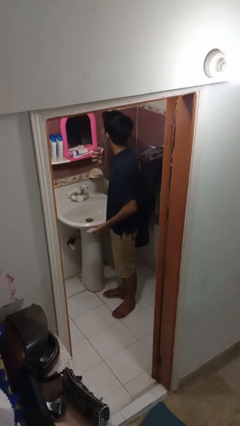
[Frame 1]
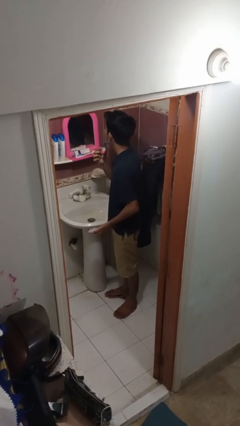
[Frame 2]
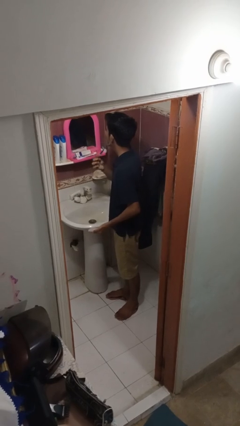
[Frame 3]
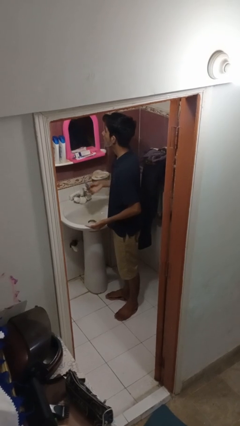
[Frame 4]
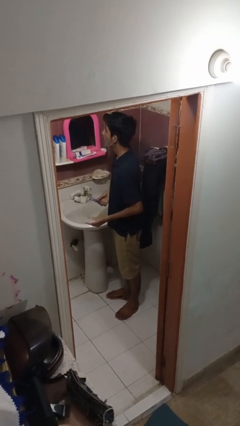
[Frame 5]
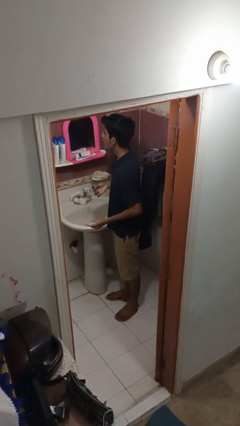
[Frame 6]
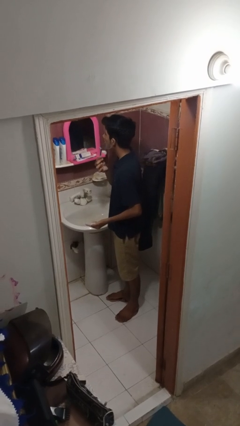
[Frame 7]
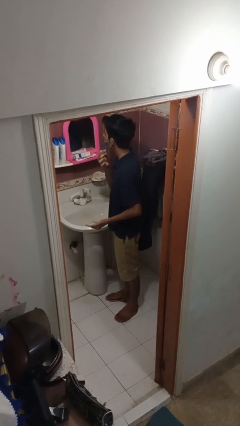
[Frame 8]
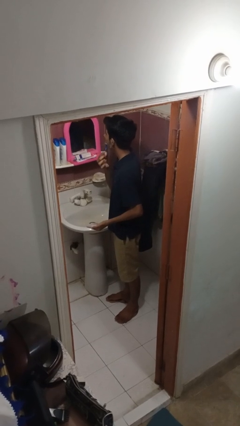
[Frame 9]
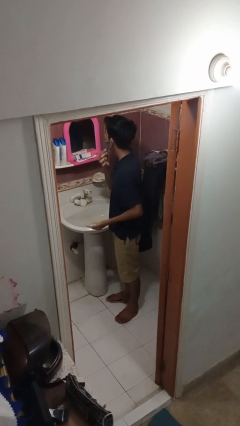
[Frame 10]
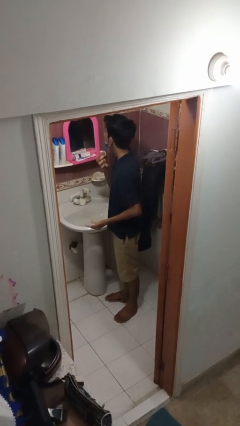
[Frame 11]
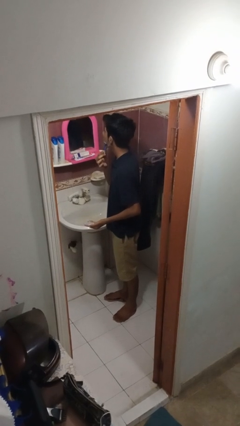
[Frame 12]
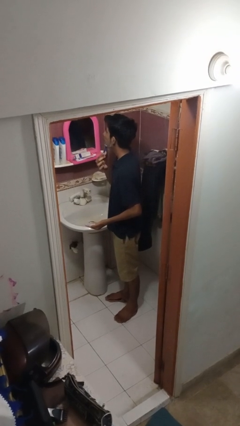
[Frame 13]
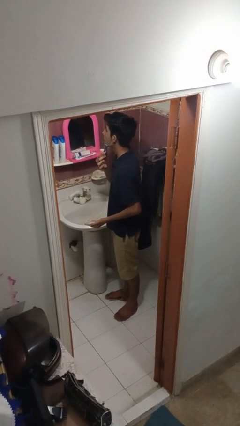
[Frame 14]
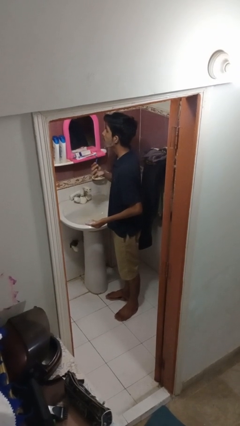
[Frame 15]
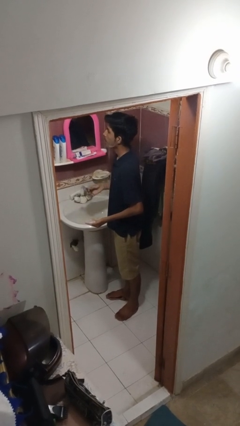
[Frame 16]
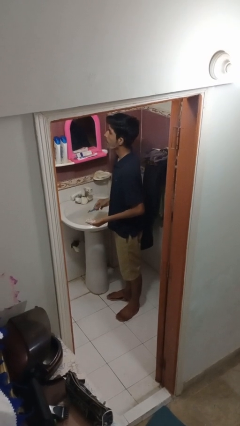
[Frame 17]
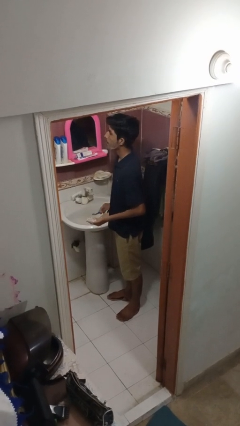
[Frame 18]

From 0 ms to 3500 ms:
person shaves face

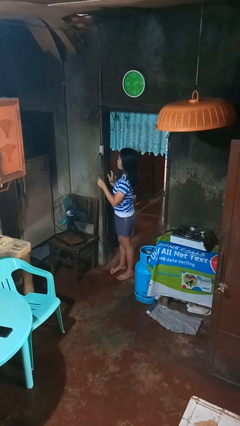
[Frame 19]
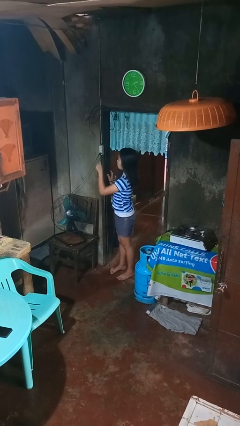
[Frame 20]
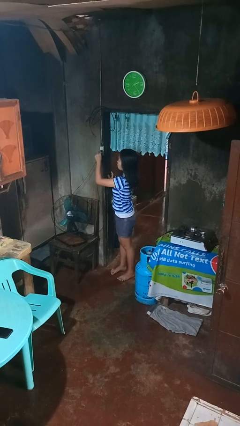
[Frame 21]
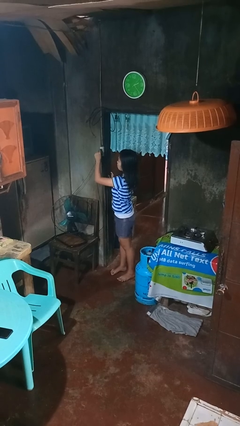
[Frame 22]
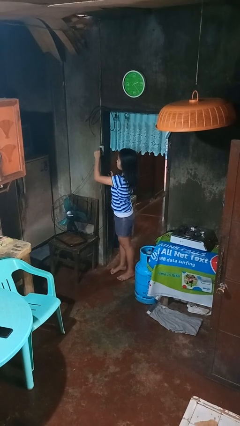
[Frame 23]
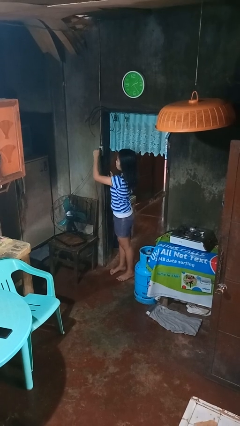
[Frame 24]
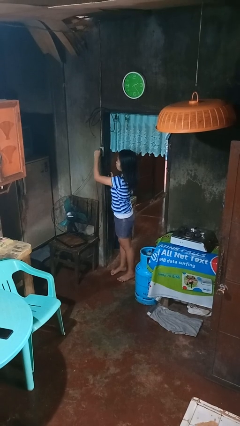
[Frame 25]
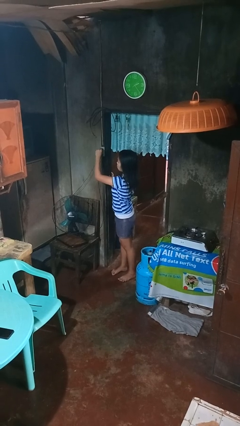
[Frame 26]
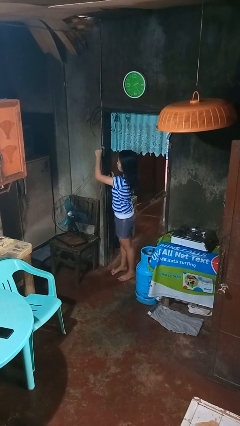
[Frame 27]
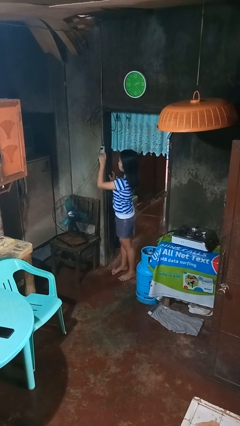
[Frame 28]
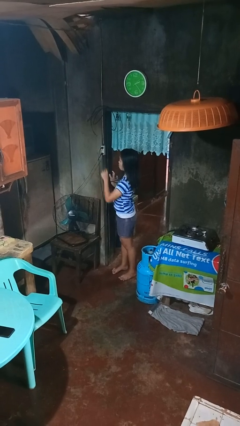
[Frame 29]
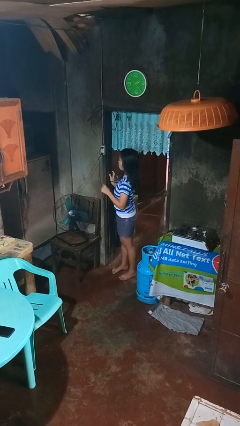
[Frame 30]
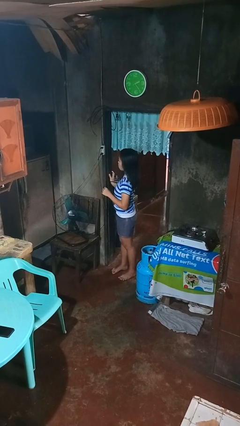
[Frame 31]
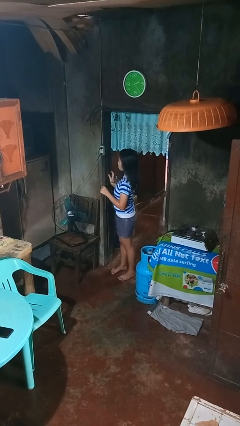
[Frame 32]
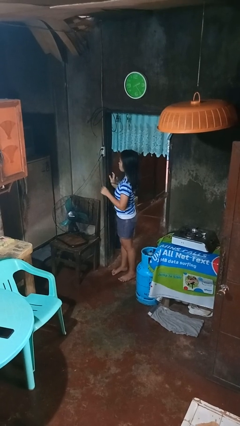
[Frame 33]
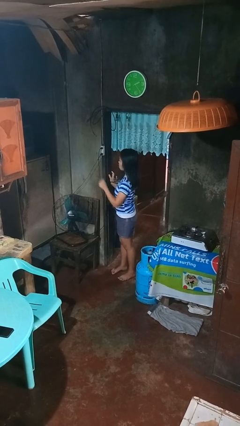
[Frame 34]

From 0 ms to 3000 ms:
person plugs into electrical socket

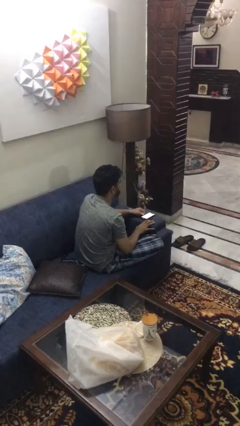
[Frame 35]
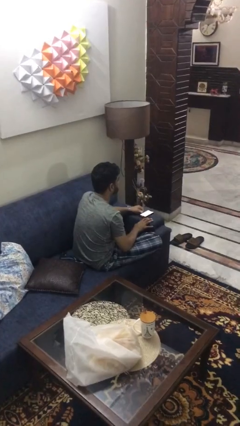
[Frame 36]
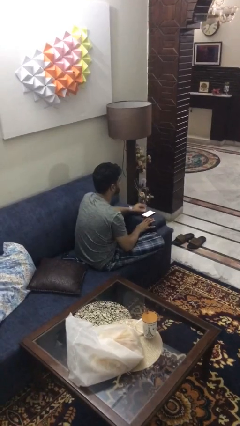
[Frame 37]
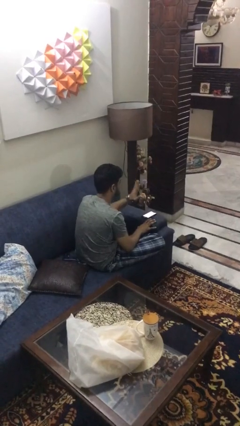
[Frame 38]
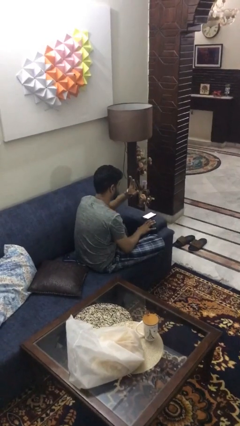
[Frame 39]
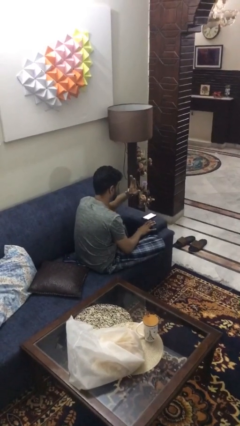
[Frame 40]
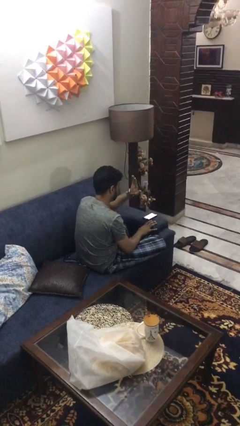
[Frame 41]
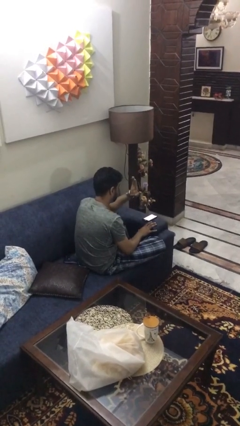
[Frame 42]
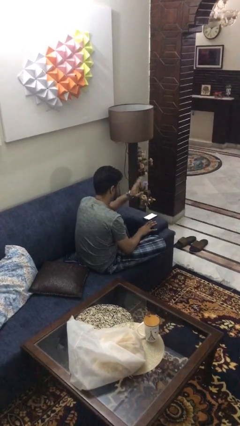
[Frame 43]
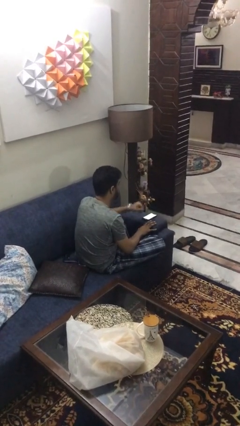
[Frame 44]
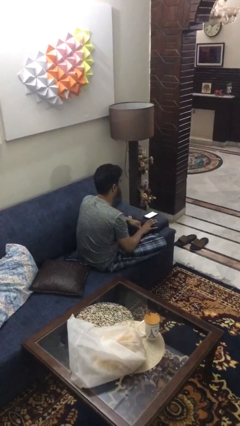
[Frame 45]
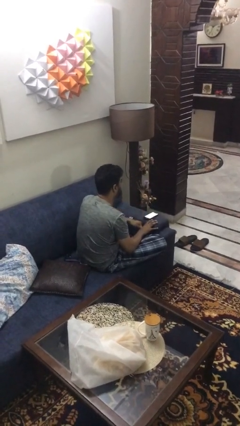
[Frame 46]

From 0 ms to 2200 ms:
person gestures stop

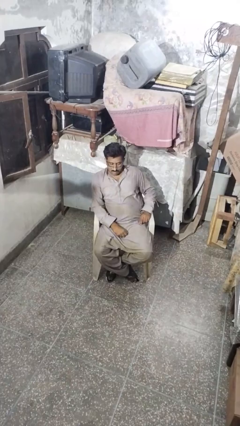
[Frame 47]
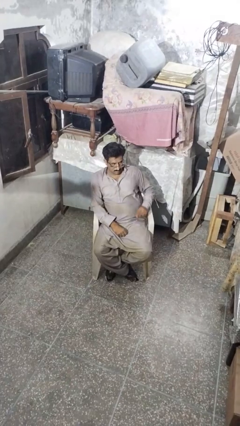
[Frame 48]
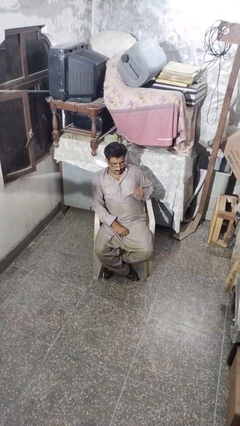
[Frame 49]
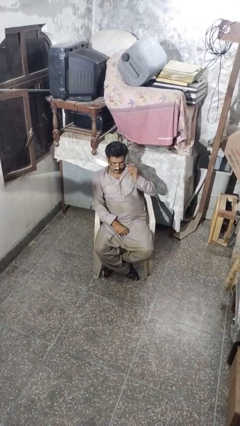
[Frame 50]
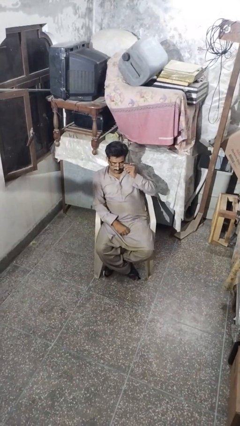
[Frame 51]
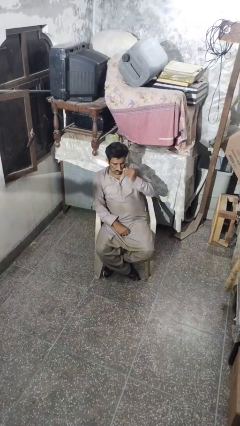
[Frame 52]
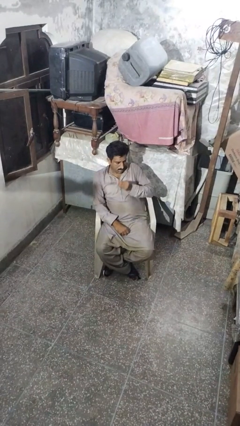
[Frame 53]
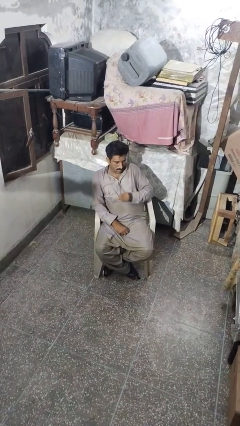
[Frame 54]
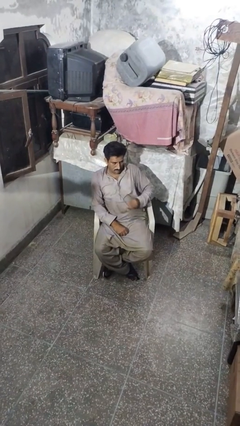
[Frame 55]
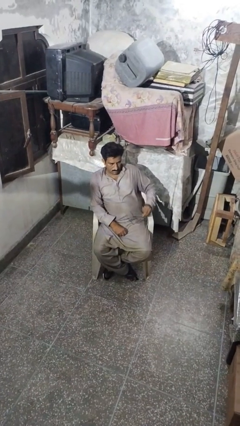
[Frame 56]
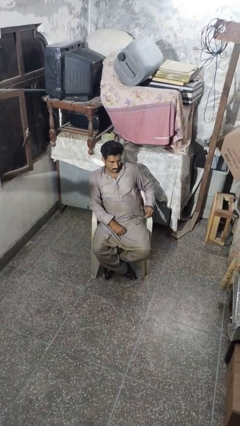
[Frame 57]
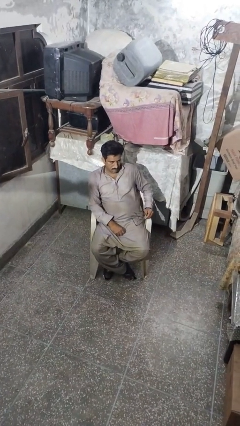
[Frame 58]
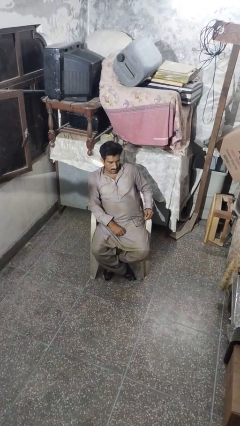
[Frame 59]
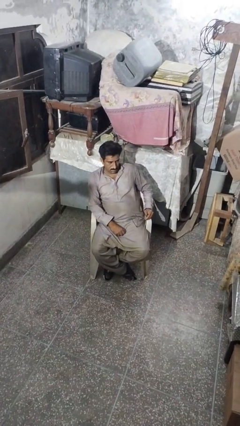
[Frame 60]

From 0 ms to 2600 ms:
person takes off glasses

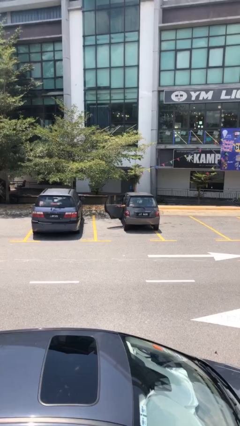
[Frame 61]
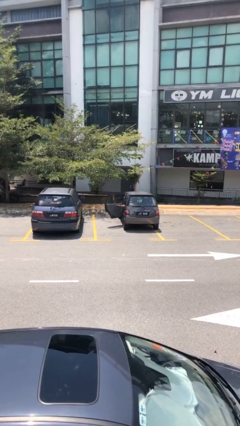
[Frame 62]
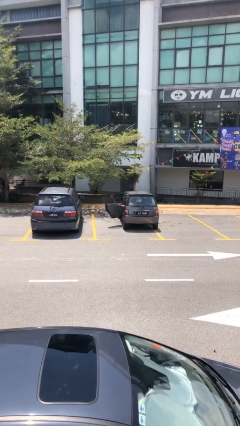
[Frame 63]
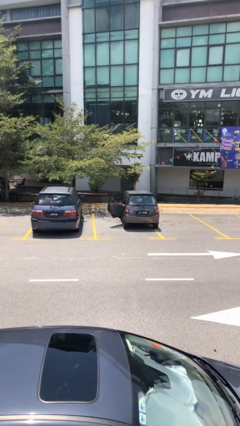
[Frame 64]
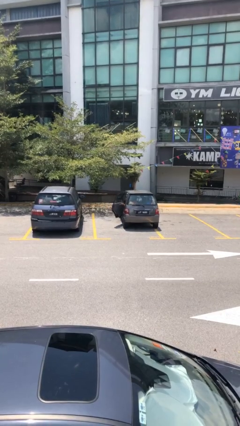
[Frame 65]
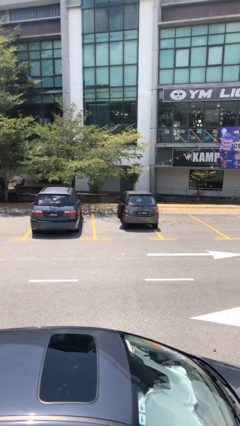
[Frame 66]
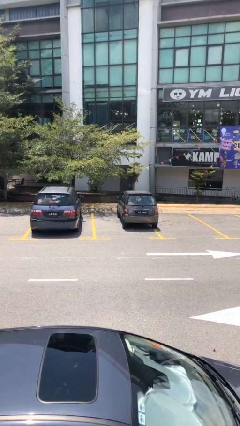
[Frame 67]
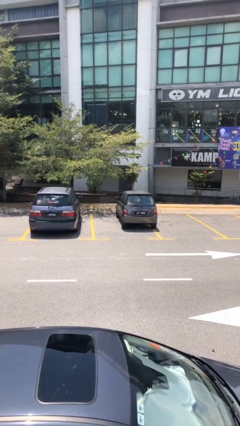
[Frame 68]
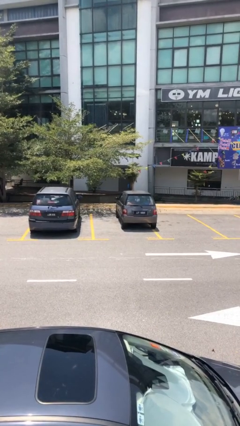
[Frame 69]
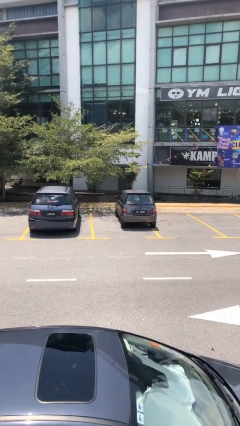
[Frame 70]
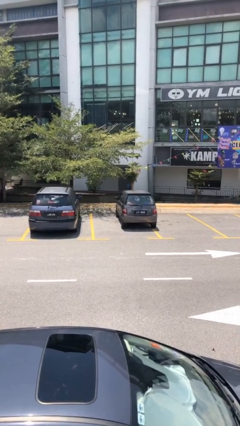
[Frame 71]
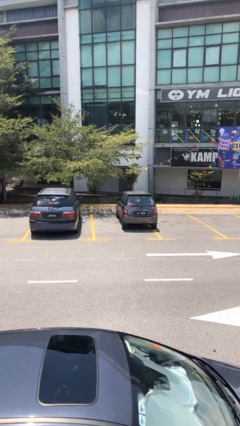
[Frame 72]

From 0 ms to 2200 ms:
person closes car door

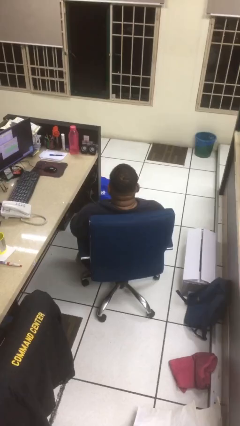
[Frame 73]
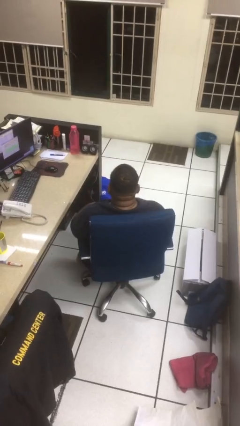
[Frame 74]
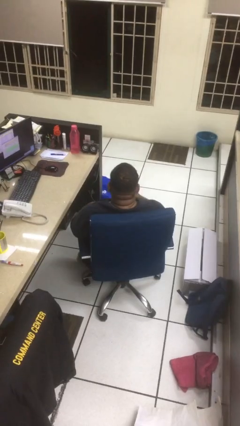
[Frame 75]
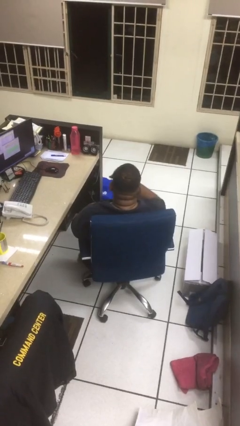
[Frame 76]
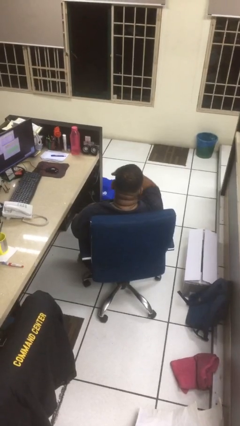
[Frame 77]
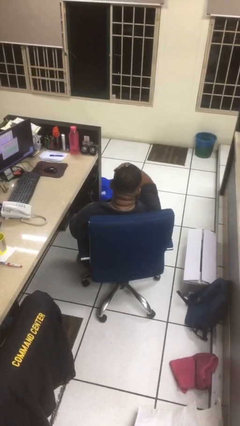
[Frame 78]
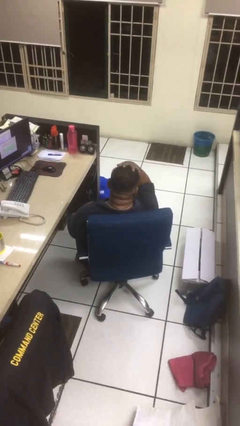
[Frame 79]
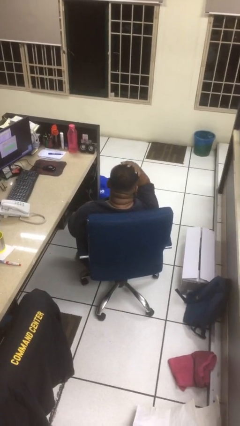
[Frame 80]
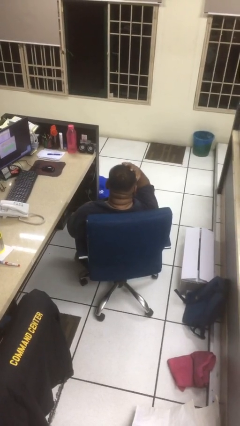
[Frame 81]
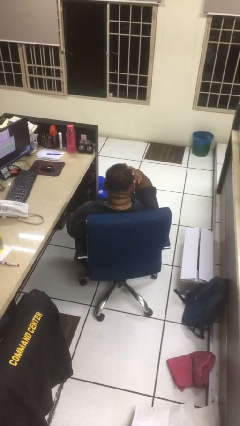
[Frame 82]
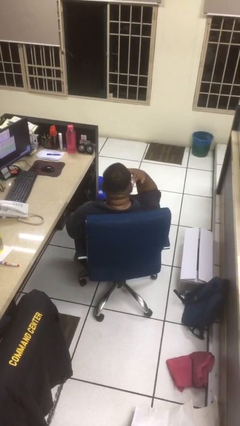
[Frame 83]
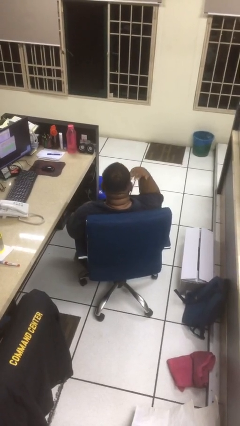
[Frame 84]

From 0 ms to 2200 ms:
person strokes hair

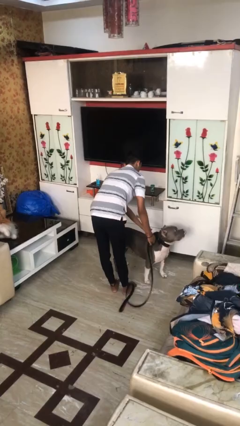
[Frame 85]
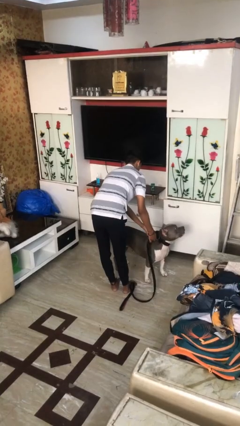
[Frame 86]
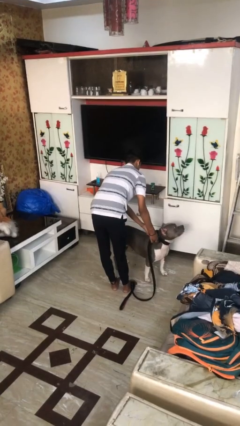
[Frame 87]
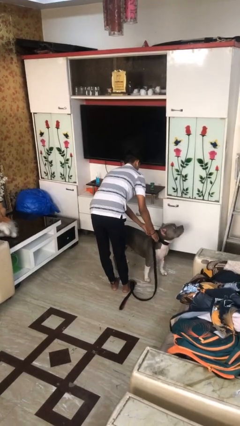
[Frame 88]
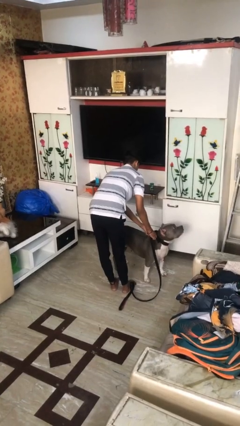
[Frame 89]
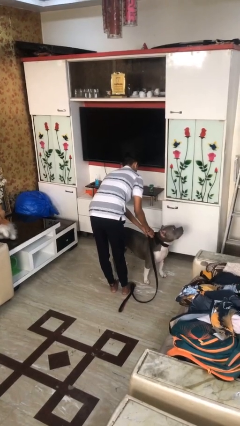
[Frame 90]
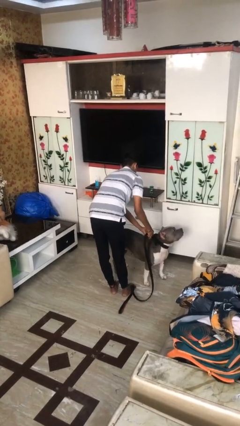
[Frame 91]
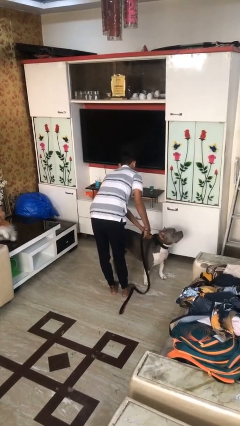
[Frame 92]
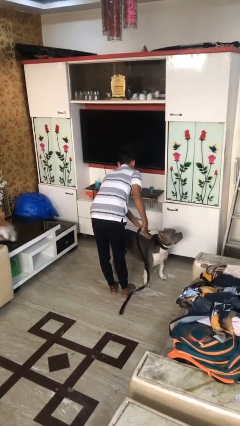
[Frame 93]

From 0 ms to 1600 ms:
person attaches leash to dog
